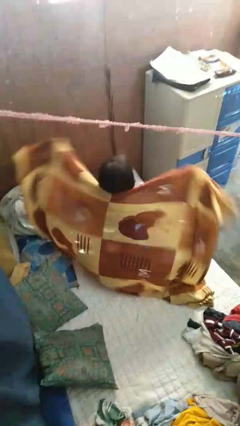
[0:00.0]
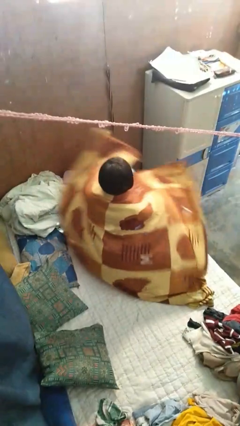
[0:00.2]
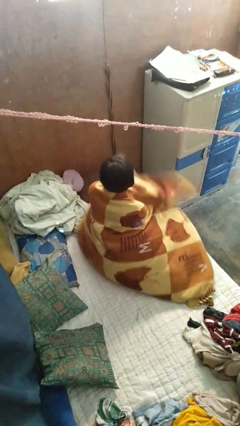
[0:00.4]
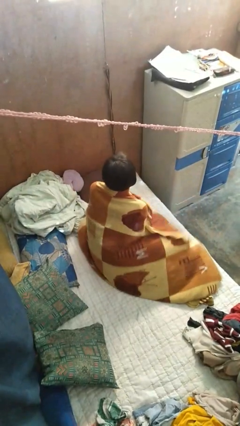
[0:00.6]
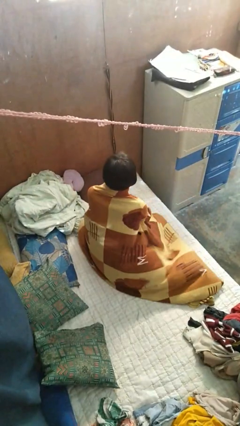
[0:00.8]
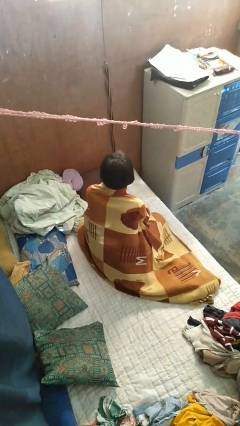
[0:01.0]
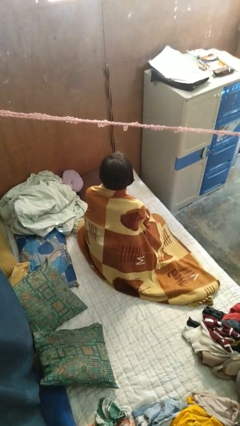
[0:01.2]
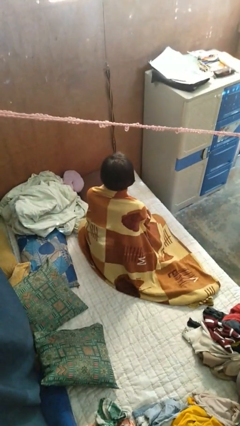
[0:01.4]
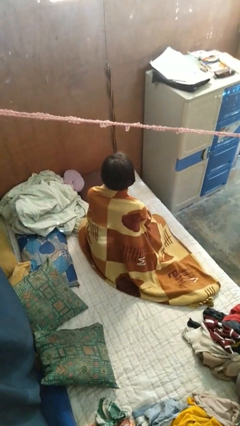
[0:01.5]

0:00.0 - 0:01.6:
person covers with blanket

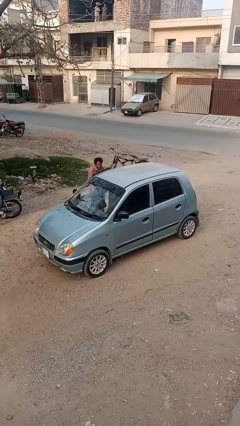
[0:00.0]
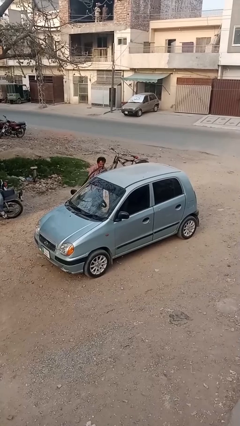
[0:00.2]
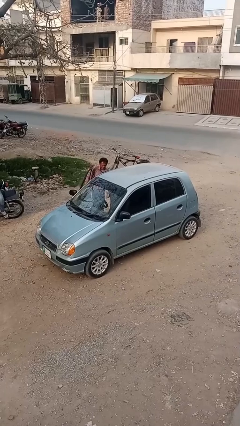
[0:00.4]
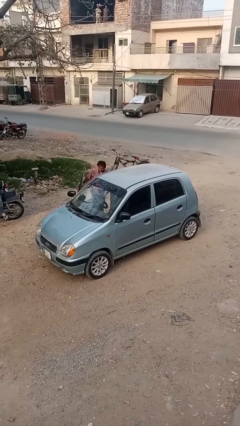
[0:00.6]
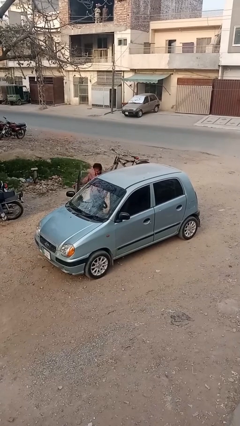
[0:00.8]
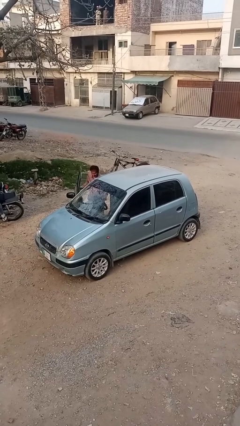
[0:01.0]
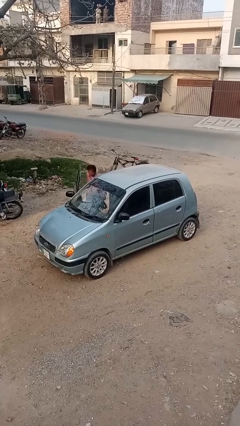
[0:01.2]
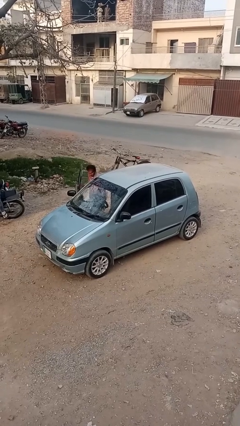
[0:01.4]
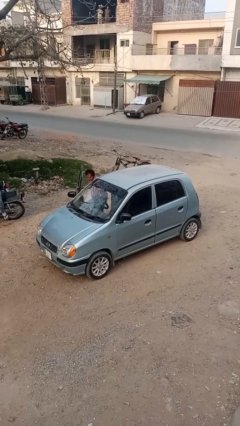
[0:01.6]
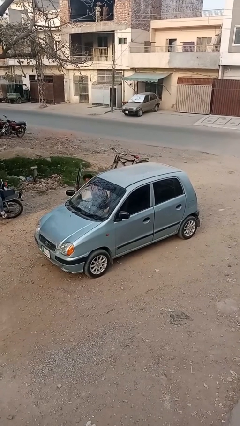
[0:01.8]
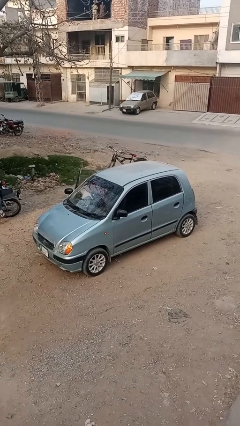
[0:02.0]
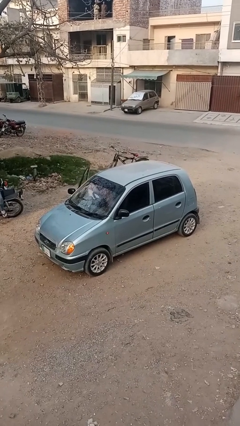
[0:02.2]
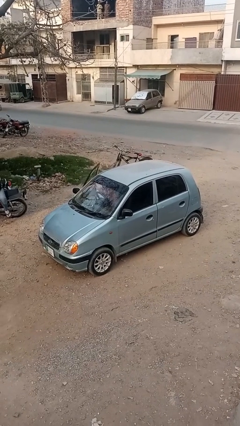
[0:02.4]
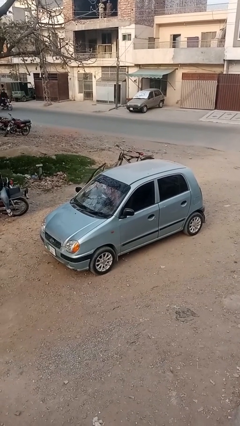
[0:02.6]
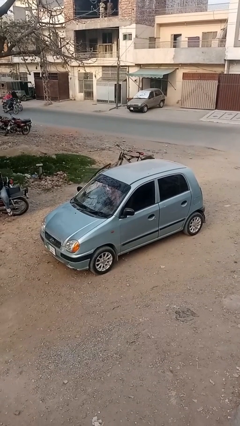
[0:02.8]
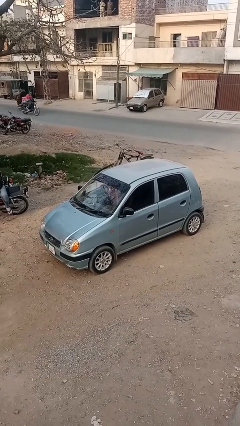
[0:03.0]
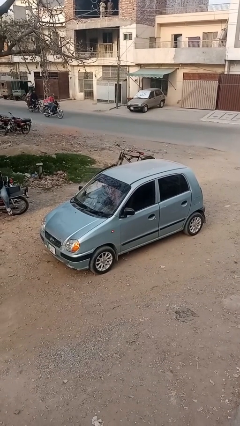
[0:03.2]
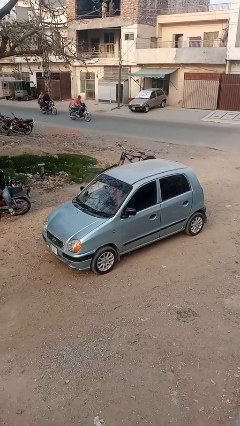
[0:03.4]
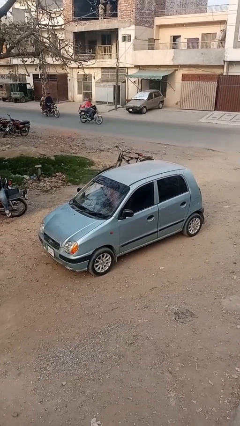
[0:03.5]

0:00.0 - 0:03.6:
car picks up person

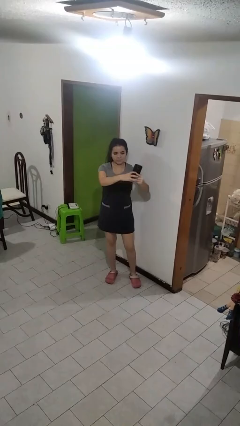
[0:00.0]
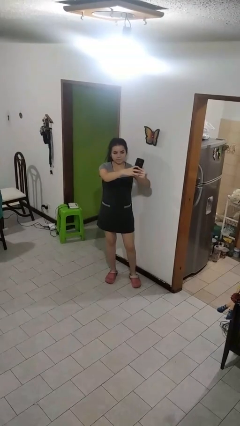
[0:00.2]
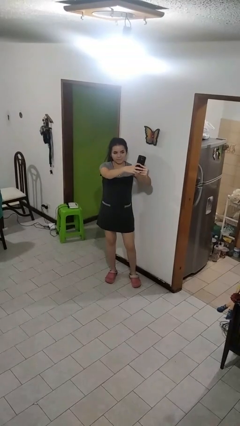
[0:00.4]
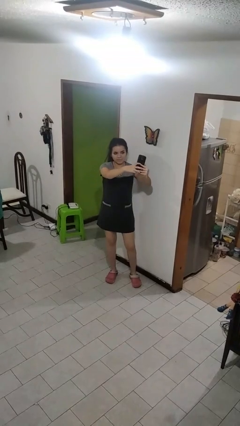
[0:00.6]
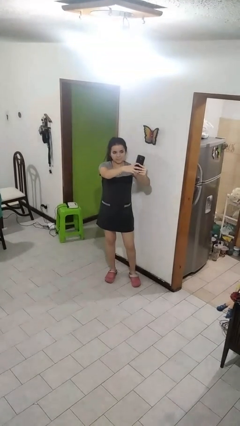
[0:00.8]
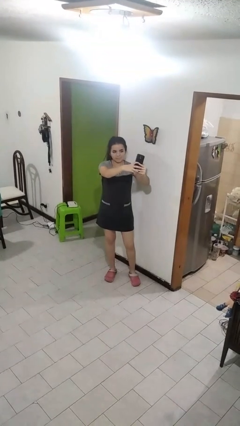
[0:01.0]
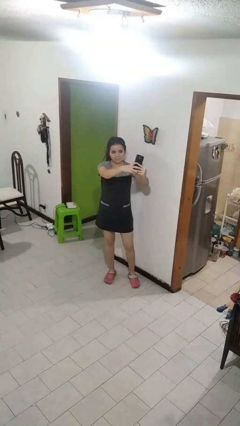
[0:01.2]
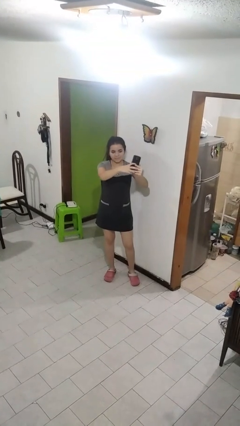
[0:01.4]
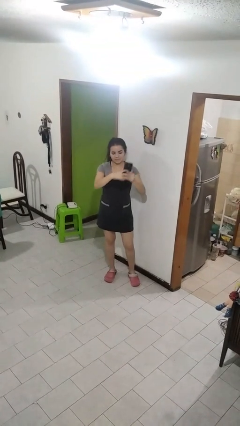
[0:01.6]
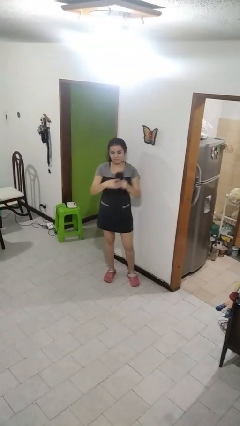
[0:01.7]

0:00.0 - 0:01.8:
person takes selfie

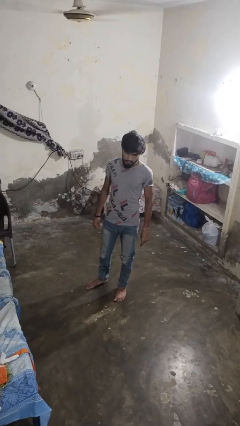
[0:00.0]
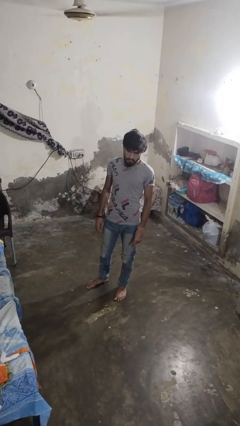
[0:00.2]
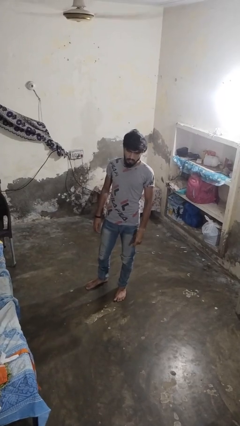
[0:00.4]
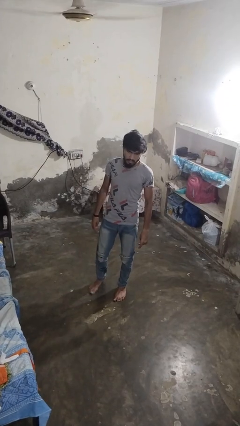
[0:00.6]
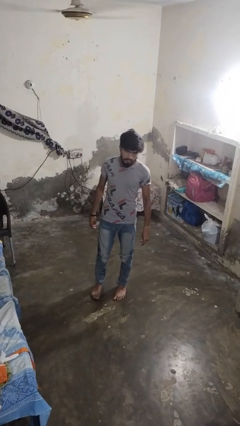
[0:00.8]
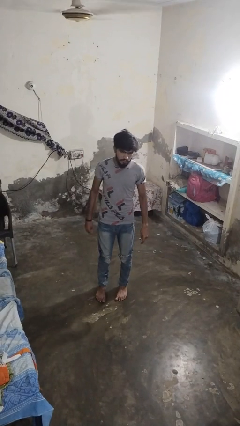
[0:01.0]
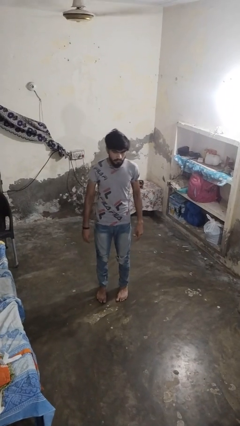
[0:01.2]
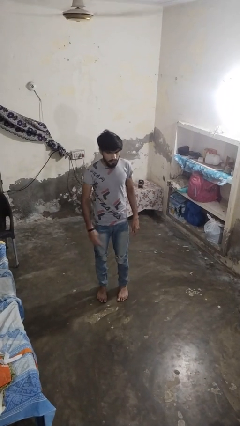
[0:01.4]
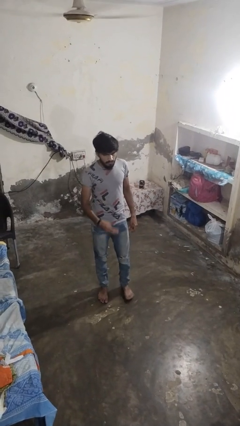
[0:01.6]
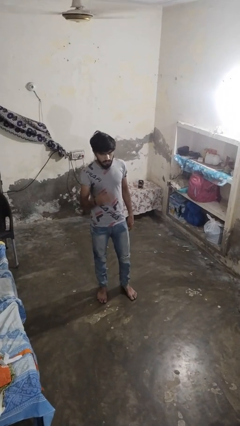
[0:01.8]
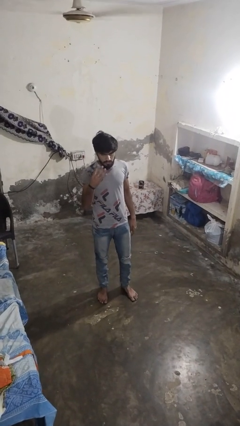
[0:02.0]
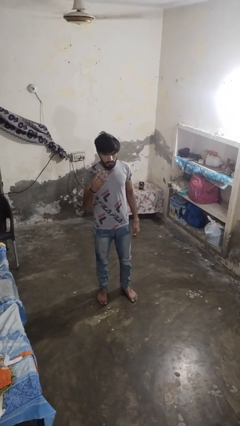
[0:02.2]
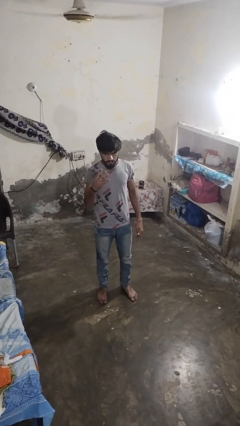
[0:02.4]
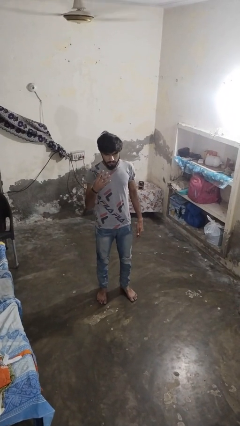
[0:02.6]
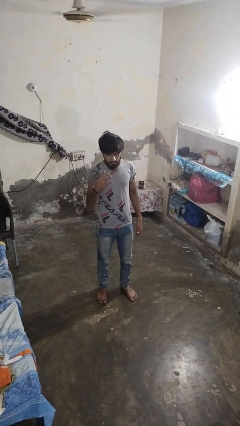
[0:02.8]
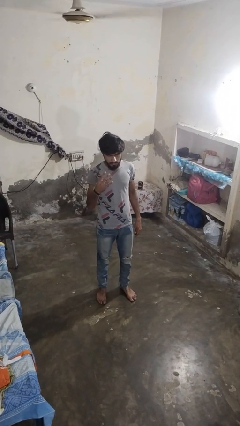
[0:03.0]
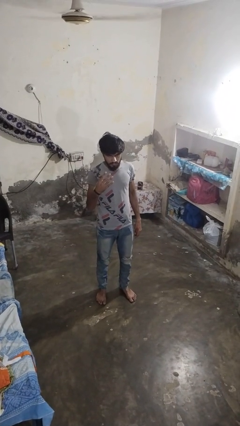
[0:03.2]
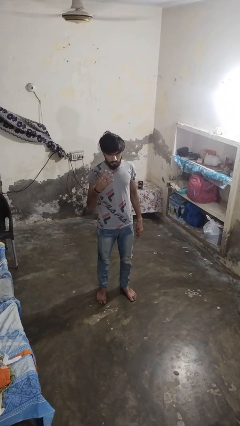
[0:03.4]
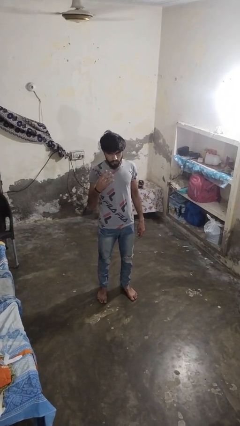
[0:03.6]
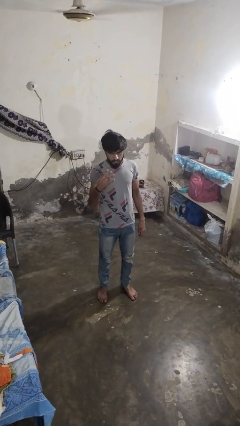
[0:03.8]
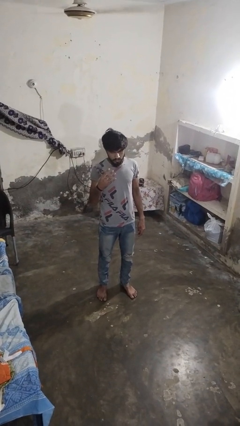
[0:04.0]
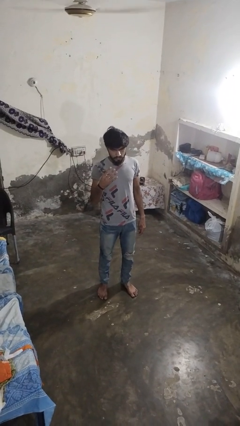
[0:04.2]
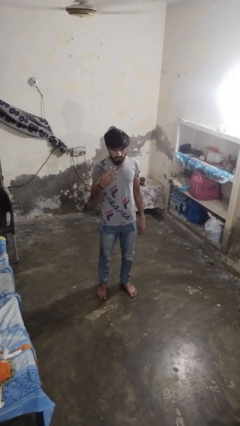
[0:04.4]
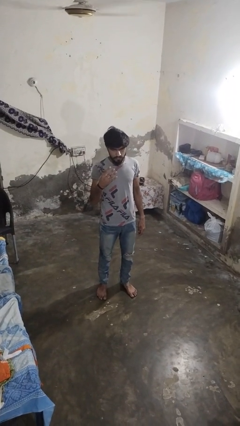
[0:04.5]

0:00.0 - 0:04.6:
person gestures number four

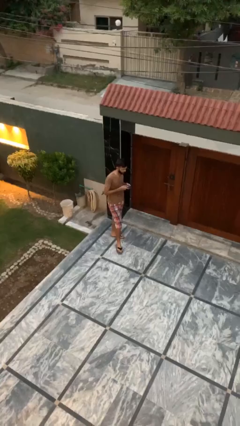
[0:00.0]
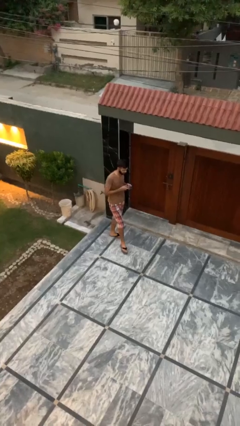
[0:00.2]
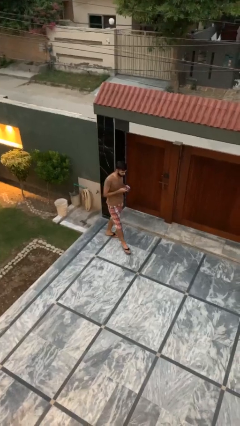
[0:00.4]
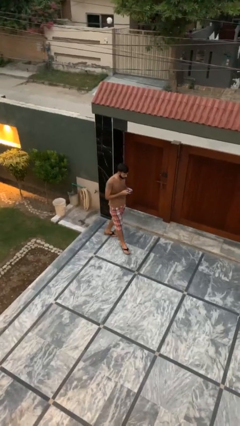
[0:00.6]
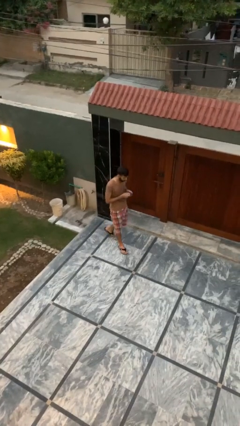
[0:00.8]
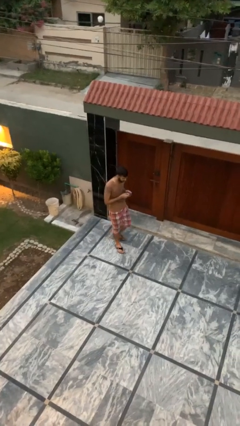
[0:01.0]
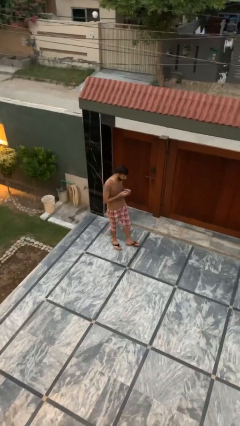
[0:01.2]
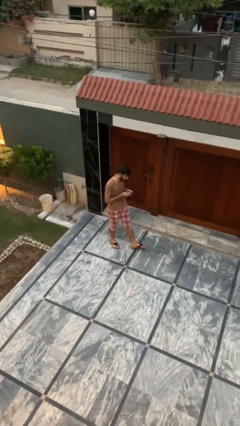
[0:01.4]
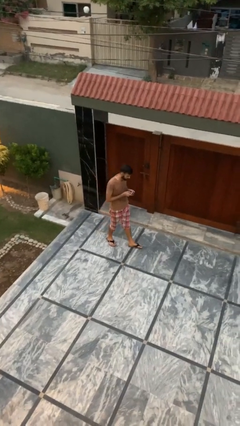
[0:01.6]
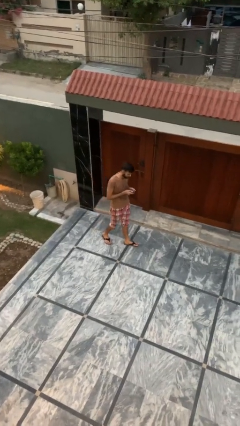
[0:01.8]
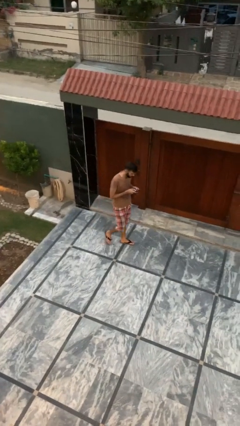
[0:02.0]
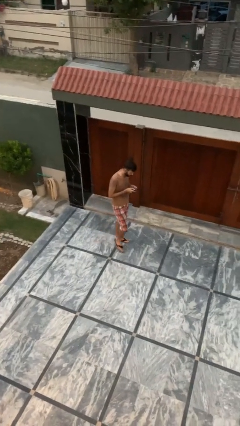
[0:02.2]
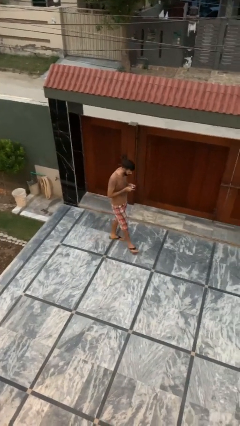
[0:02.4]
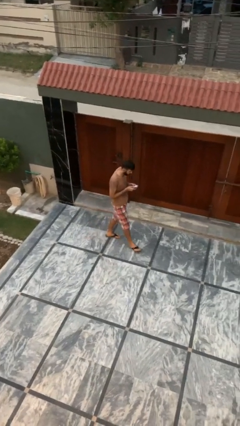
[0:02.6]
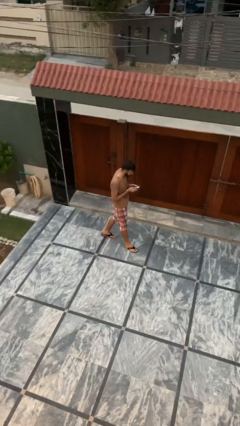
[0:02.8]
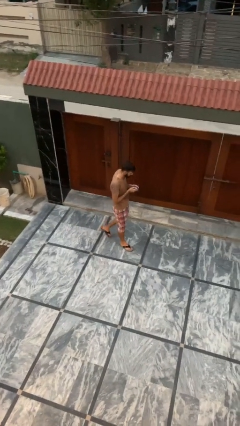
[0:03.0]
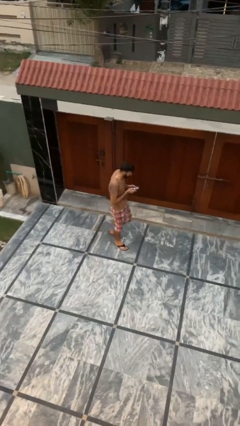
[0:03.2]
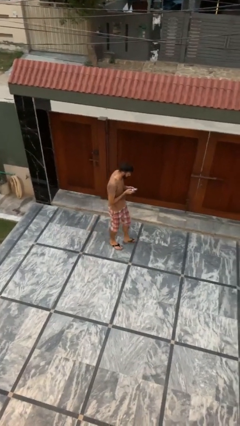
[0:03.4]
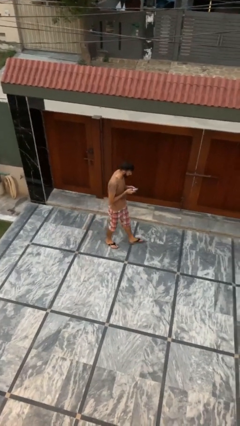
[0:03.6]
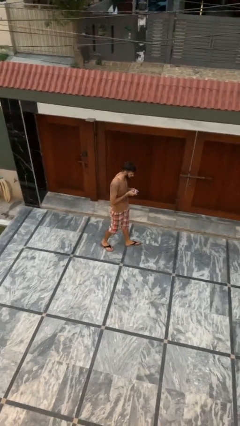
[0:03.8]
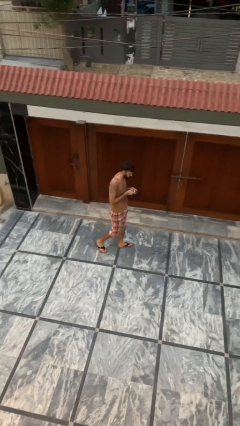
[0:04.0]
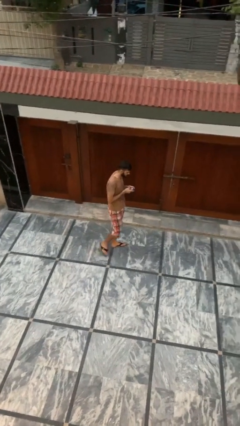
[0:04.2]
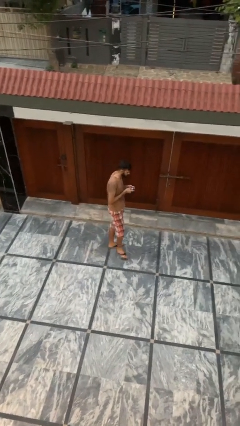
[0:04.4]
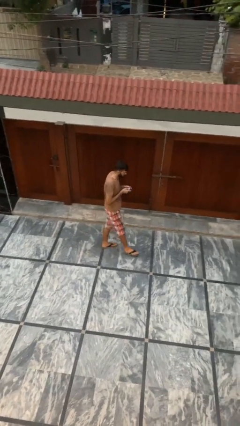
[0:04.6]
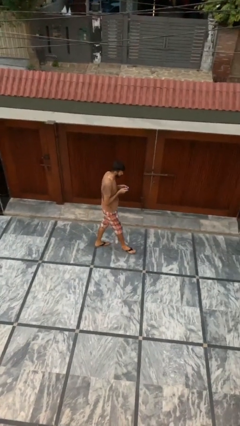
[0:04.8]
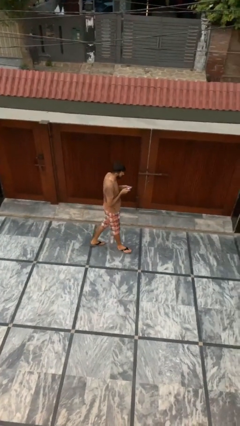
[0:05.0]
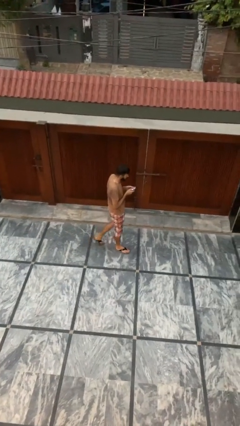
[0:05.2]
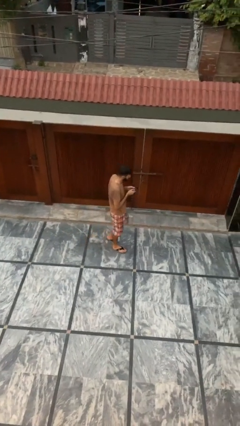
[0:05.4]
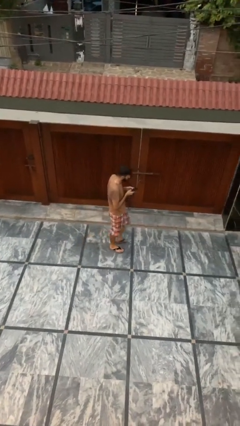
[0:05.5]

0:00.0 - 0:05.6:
person texts on phone

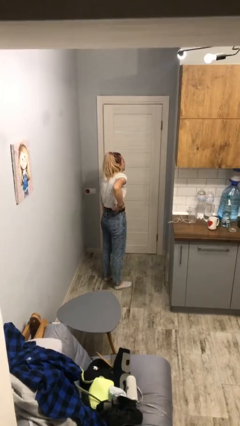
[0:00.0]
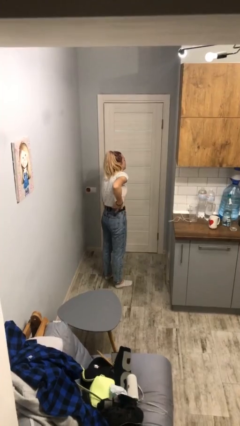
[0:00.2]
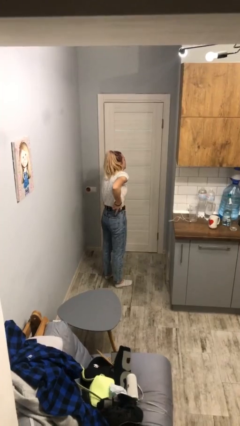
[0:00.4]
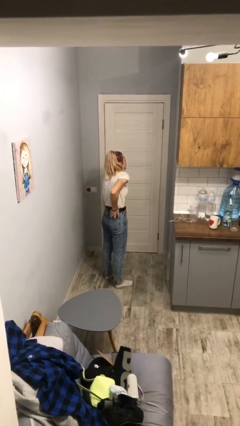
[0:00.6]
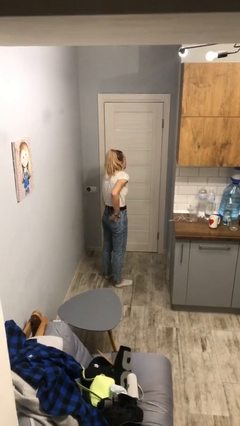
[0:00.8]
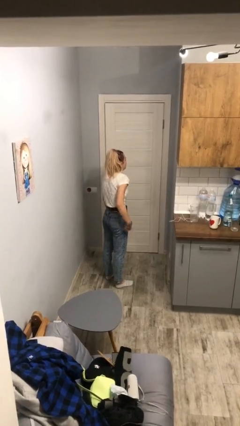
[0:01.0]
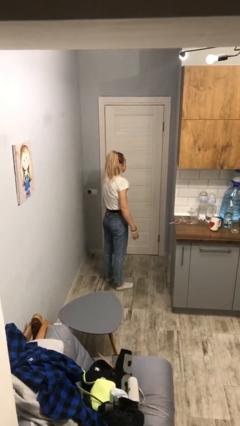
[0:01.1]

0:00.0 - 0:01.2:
person puts phone into pocket
